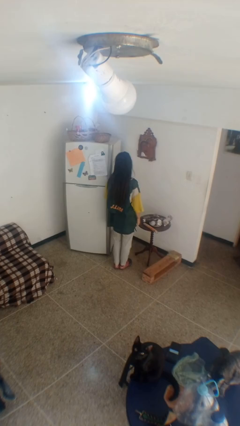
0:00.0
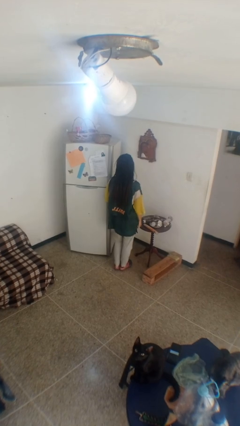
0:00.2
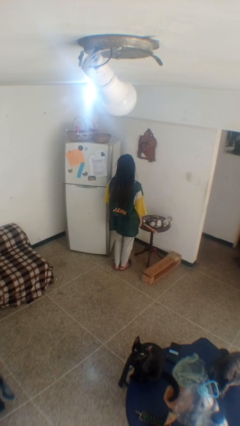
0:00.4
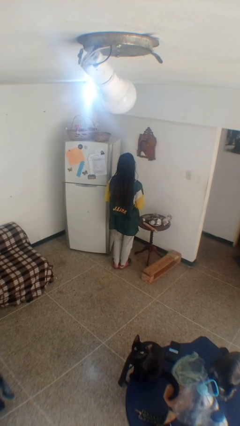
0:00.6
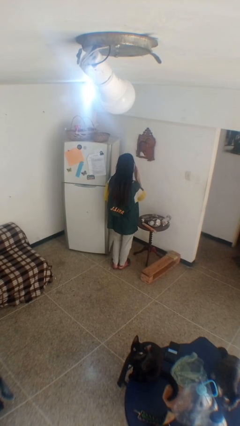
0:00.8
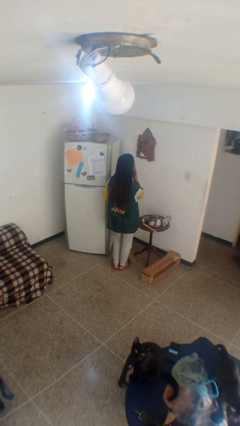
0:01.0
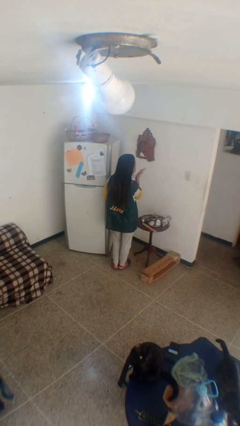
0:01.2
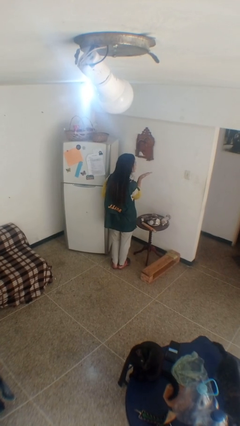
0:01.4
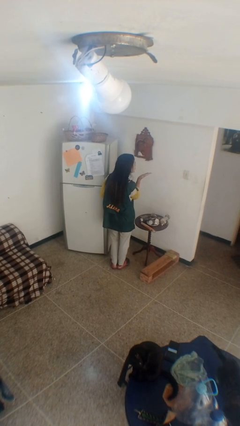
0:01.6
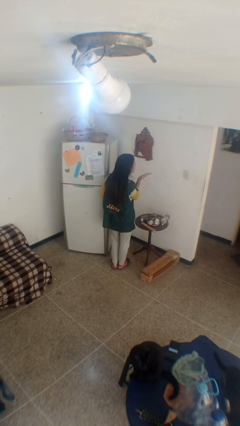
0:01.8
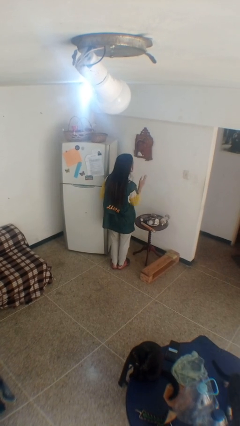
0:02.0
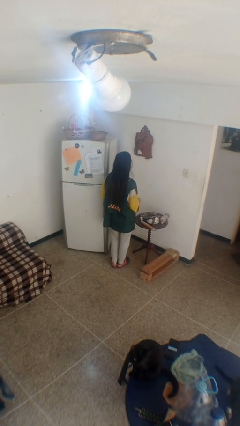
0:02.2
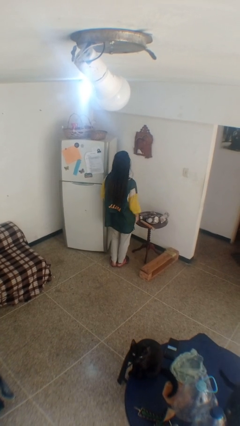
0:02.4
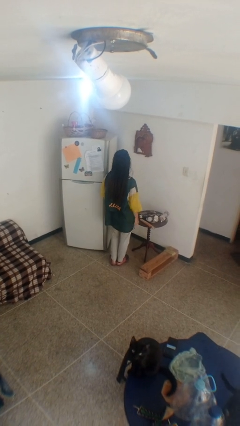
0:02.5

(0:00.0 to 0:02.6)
person gestures blow kiss

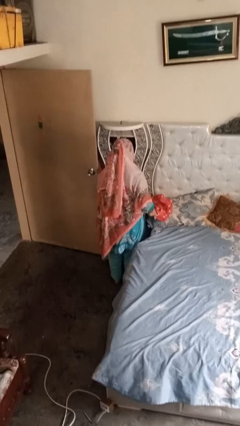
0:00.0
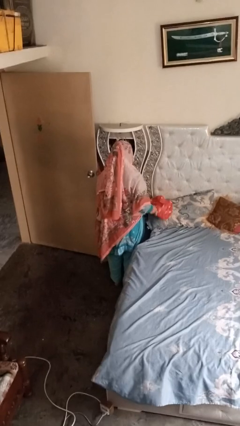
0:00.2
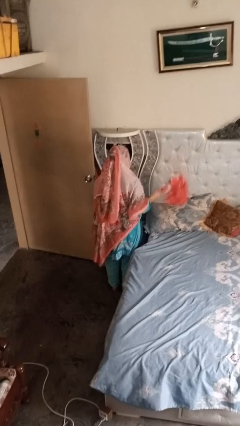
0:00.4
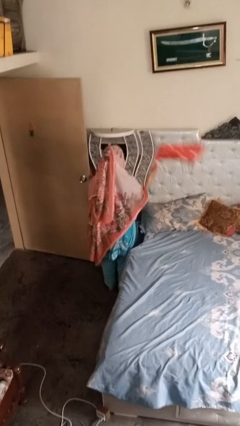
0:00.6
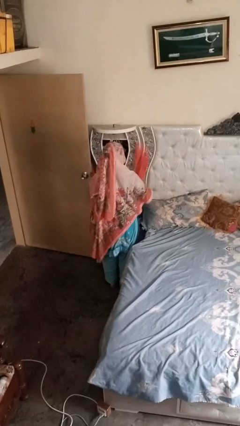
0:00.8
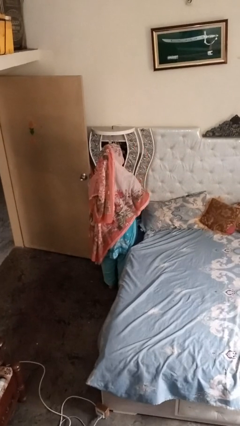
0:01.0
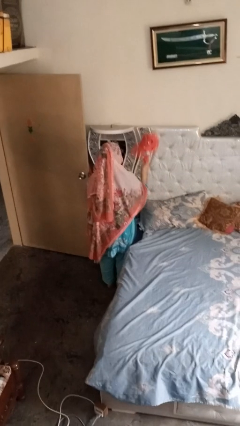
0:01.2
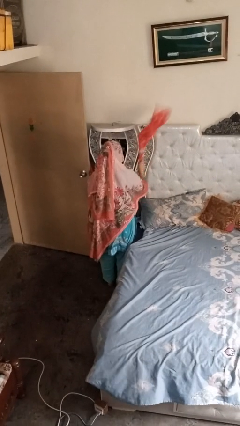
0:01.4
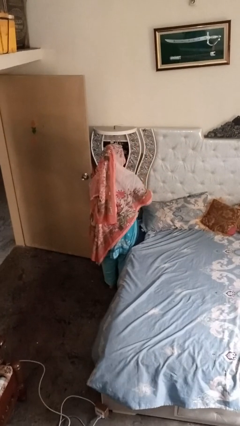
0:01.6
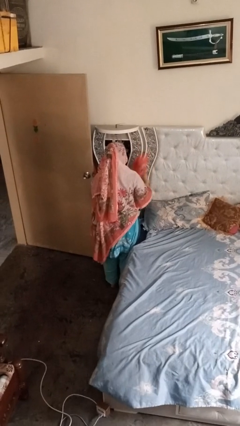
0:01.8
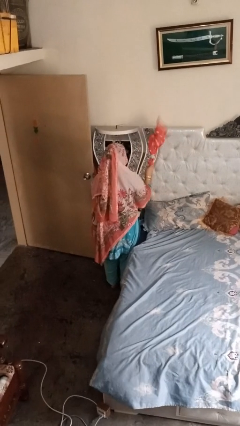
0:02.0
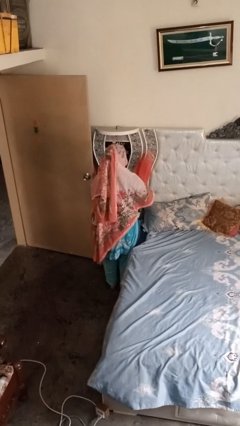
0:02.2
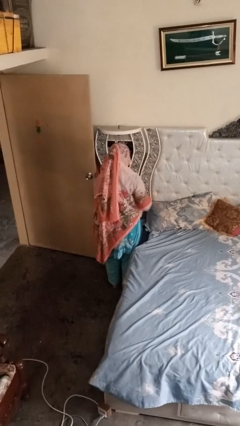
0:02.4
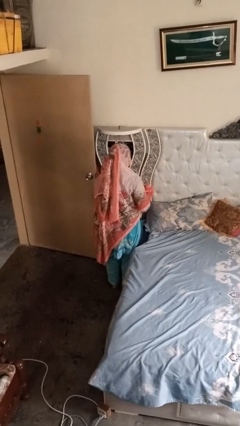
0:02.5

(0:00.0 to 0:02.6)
person dusts furniture

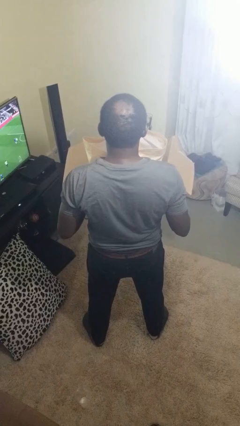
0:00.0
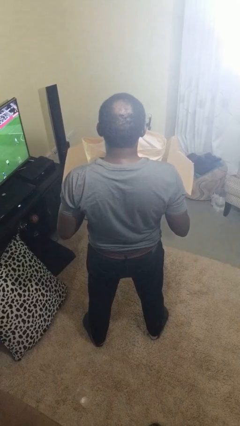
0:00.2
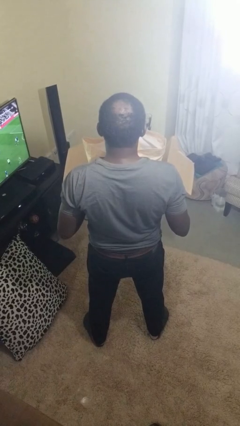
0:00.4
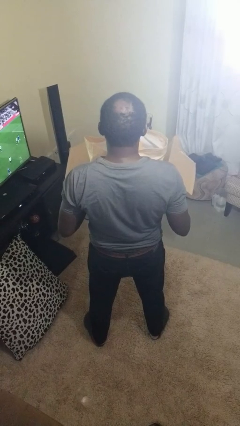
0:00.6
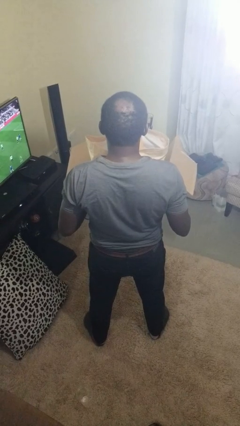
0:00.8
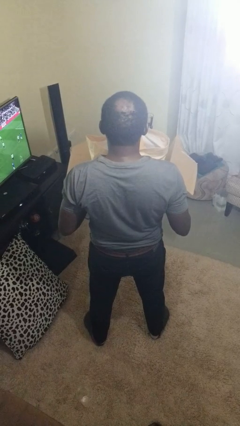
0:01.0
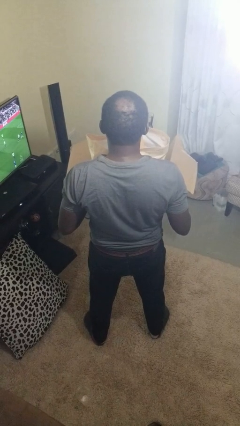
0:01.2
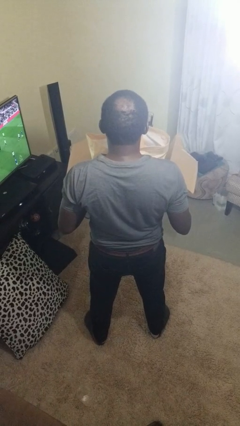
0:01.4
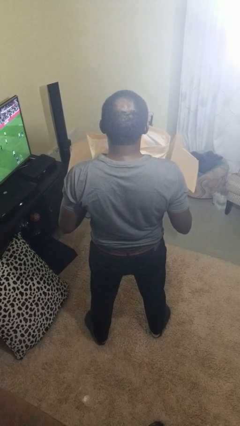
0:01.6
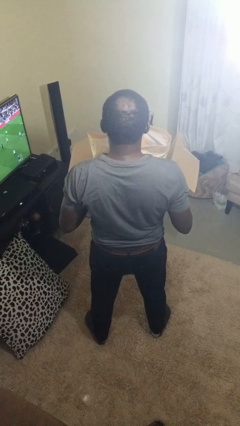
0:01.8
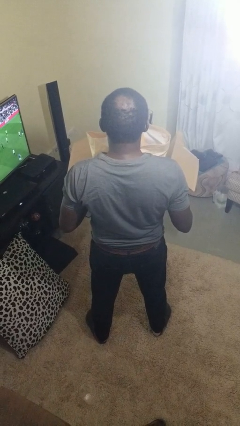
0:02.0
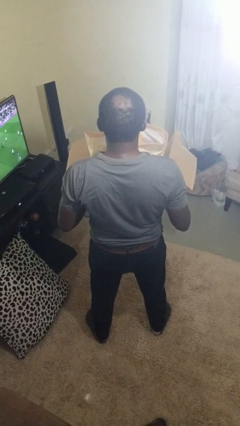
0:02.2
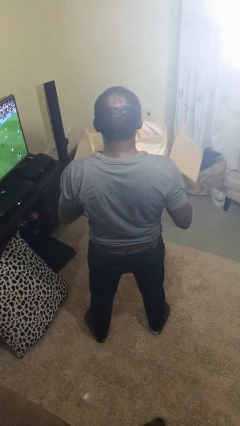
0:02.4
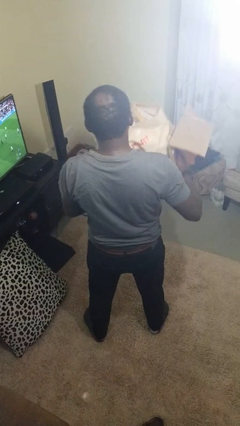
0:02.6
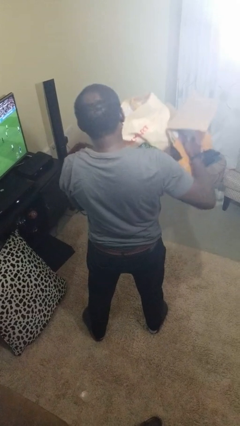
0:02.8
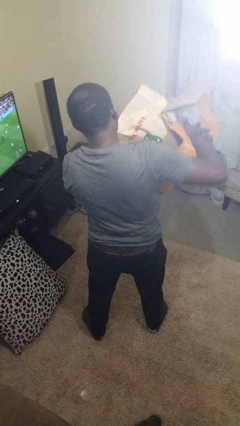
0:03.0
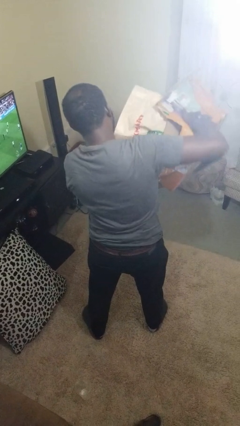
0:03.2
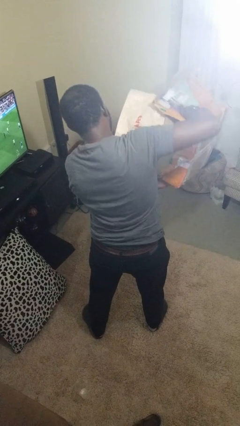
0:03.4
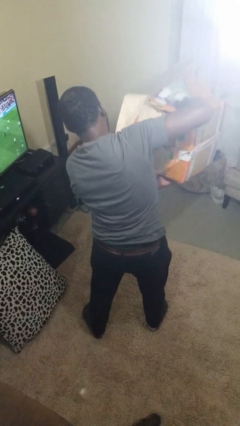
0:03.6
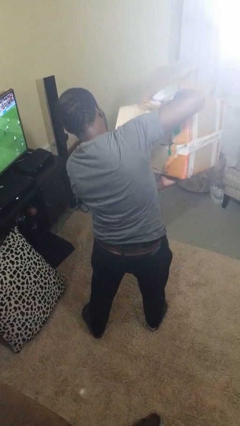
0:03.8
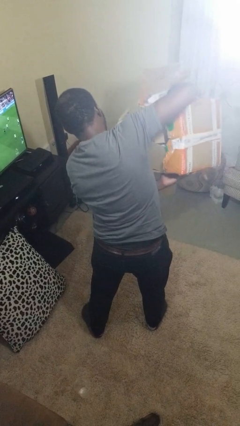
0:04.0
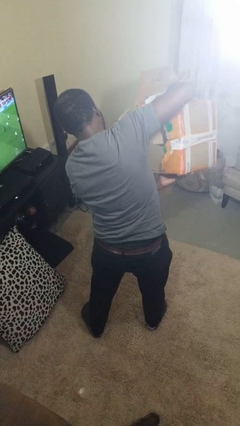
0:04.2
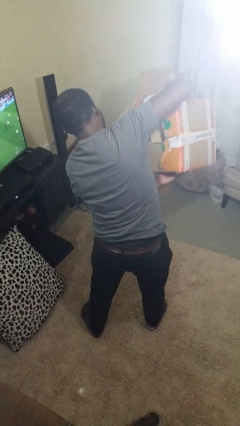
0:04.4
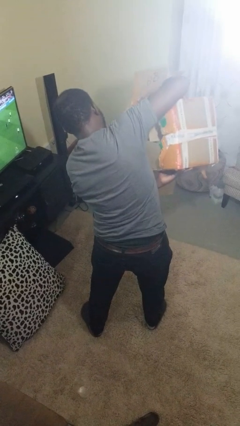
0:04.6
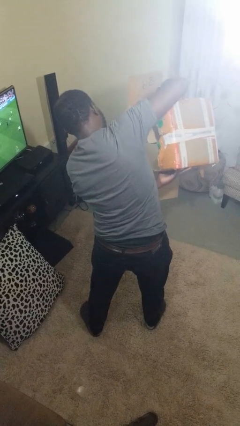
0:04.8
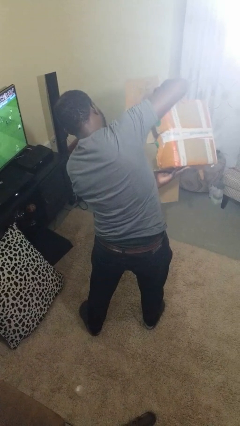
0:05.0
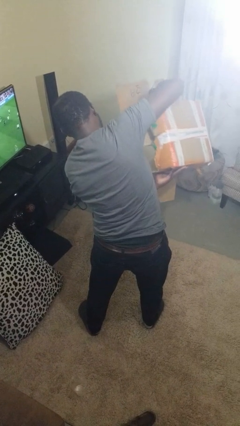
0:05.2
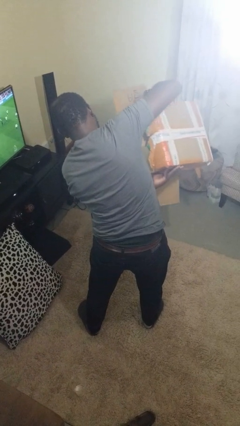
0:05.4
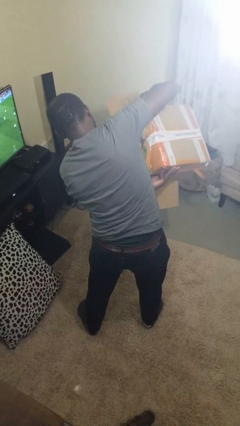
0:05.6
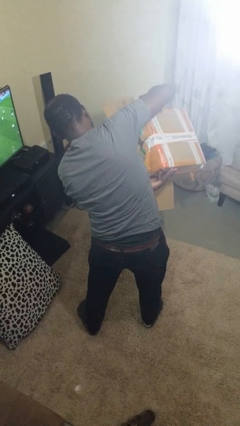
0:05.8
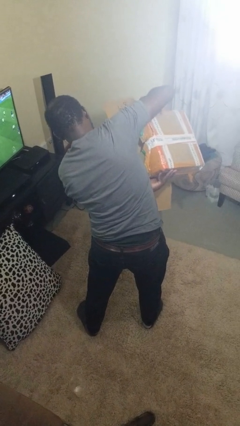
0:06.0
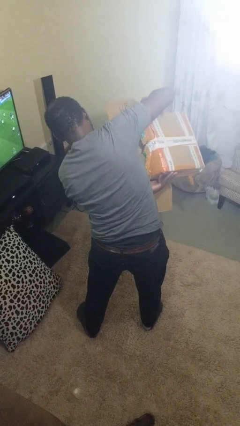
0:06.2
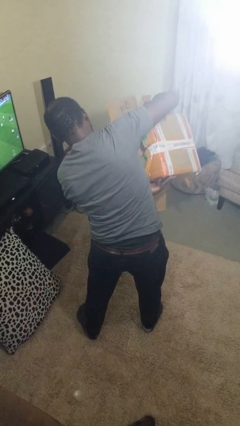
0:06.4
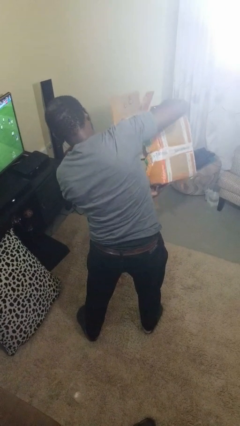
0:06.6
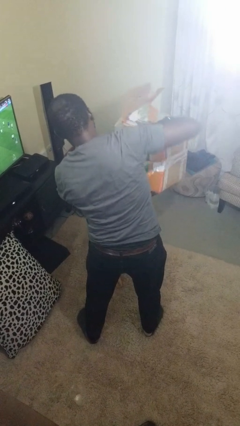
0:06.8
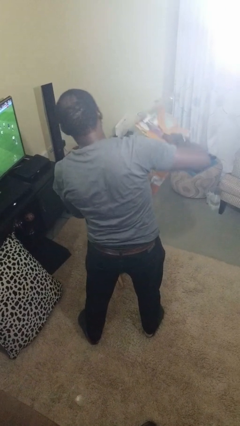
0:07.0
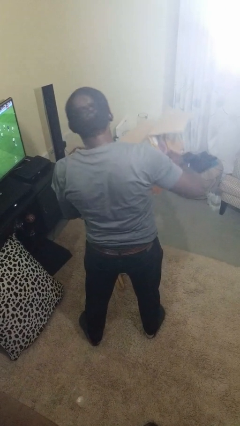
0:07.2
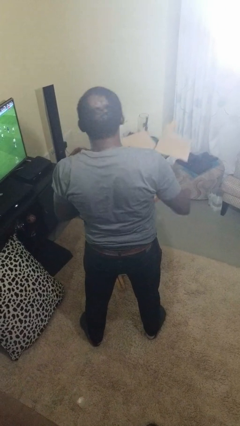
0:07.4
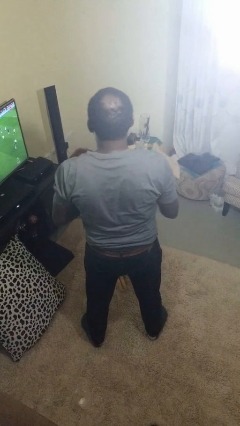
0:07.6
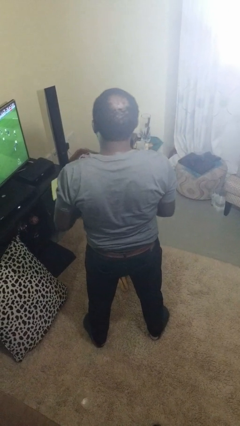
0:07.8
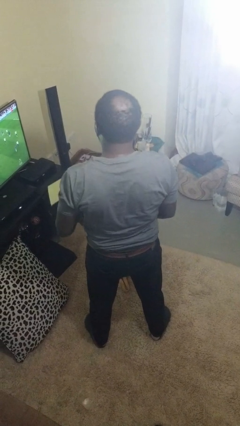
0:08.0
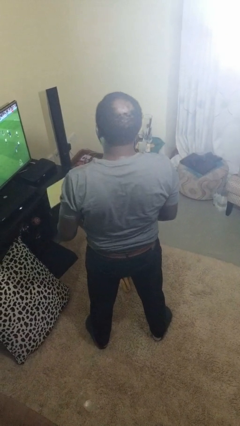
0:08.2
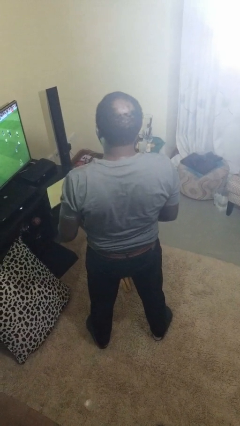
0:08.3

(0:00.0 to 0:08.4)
person unloads box onto floor

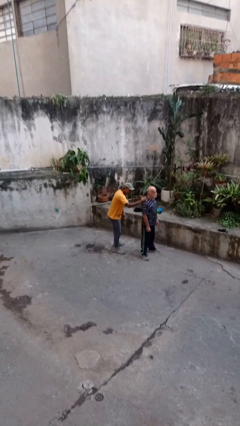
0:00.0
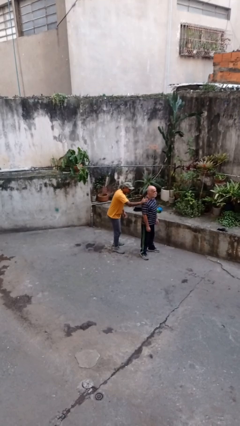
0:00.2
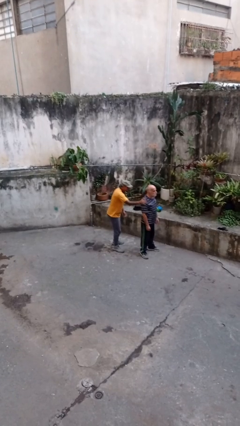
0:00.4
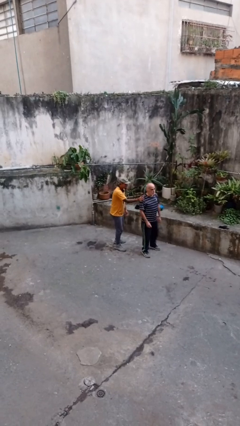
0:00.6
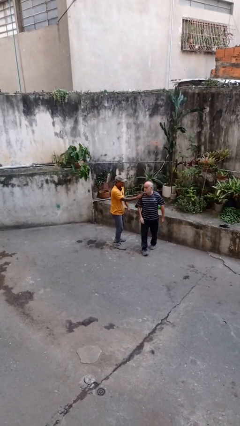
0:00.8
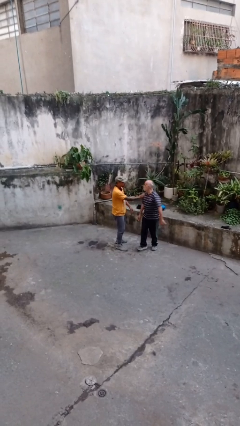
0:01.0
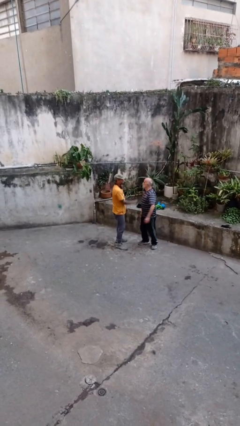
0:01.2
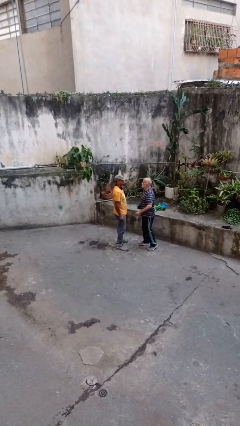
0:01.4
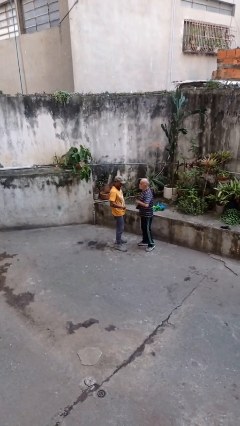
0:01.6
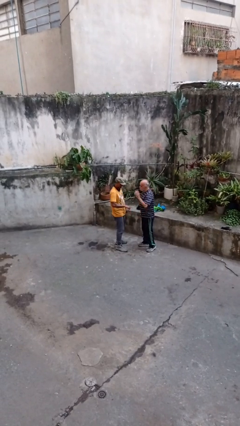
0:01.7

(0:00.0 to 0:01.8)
person spins person around

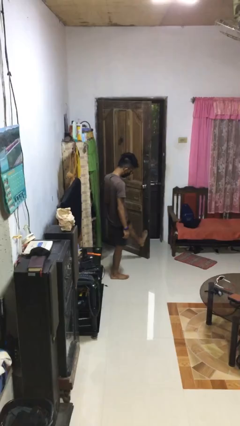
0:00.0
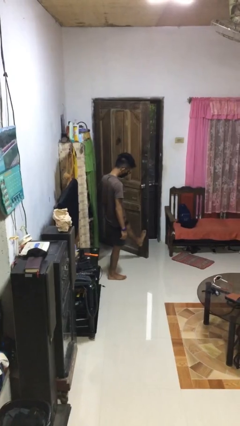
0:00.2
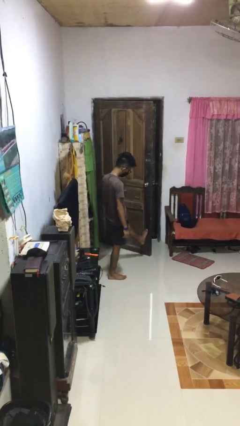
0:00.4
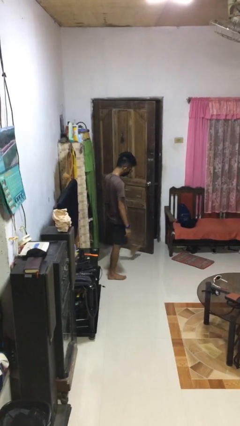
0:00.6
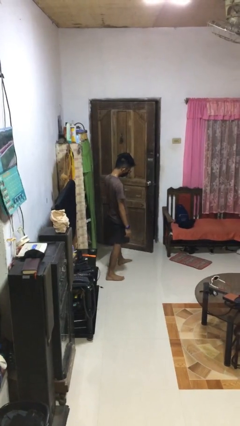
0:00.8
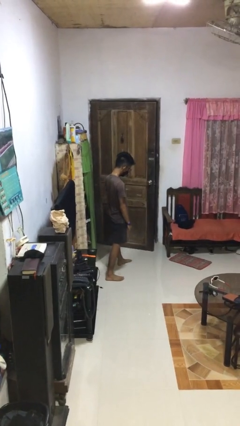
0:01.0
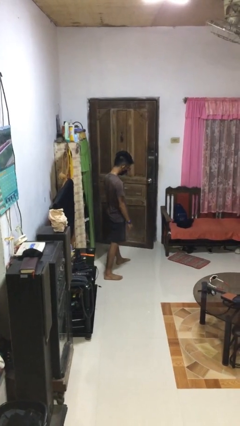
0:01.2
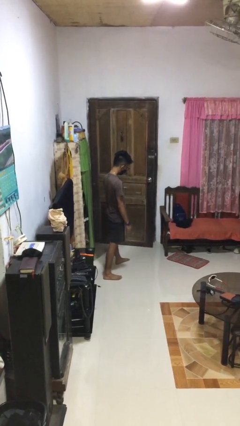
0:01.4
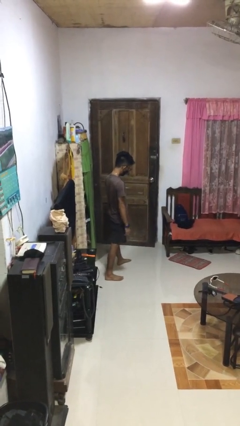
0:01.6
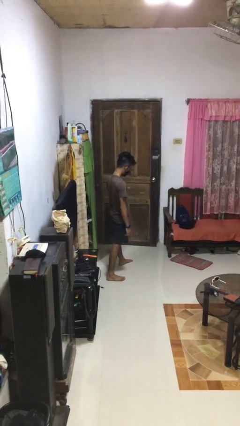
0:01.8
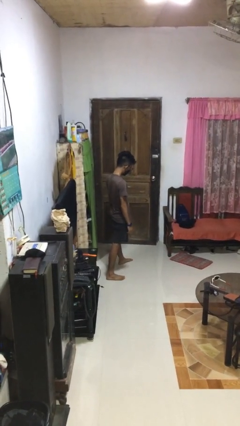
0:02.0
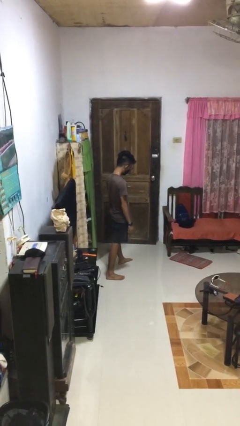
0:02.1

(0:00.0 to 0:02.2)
person closes door with foot
